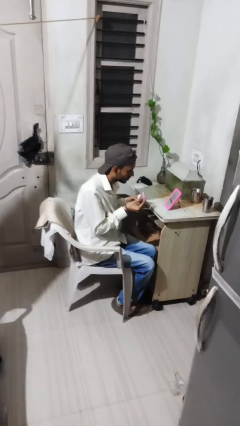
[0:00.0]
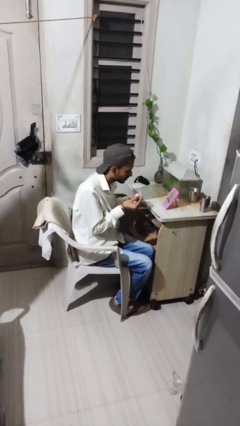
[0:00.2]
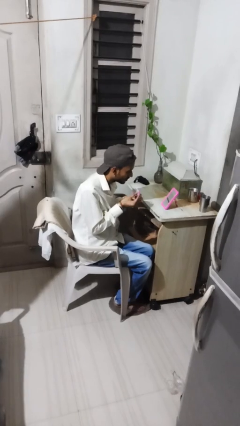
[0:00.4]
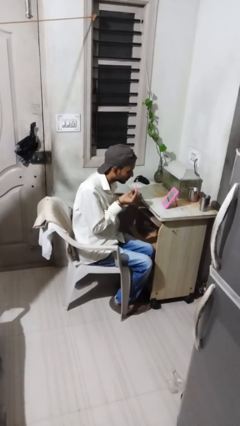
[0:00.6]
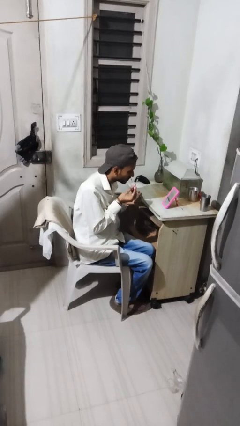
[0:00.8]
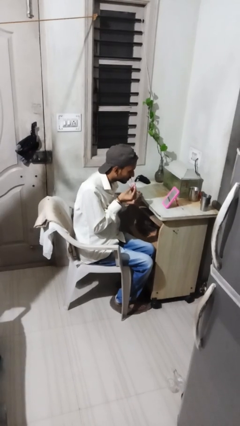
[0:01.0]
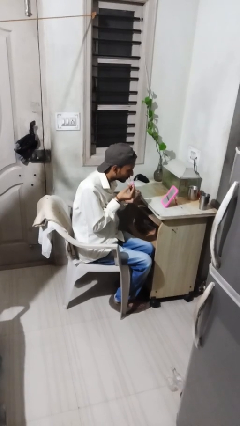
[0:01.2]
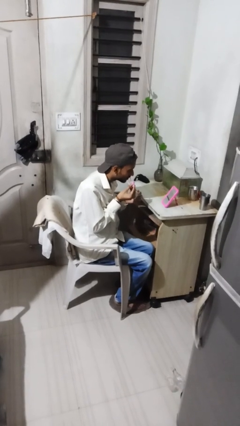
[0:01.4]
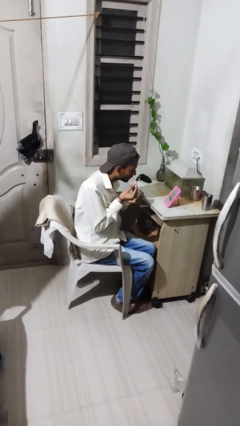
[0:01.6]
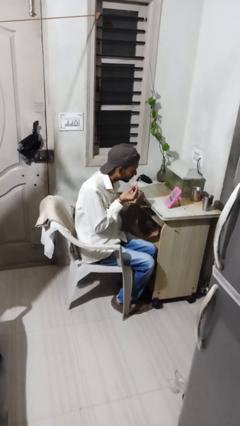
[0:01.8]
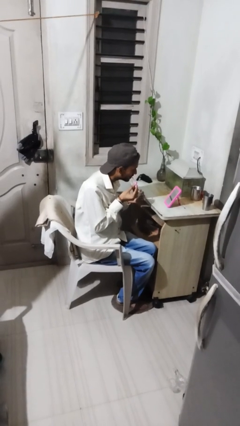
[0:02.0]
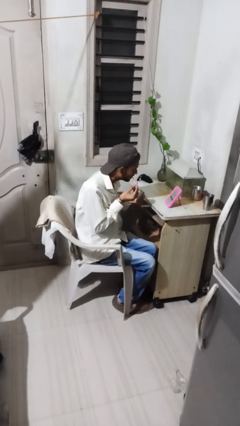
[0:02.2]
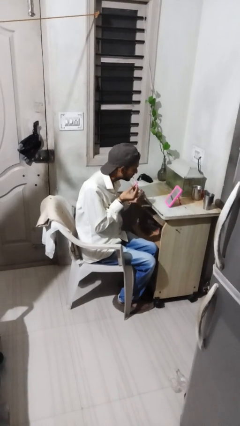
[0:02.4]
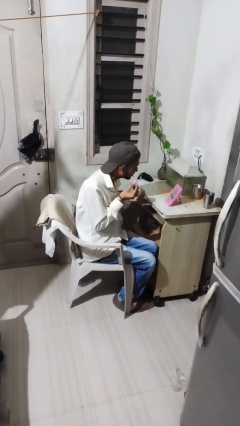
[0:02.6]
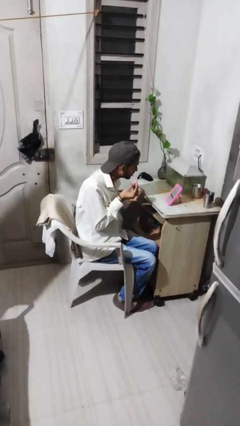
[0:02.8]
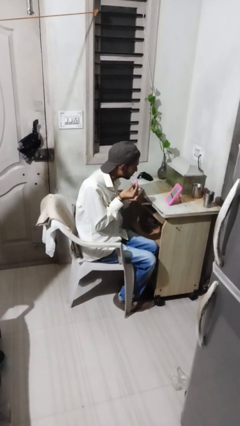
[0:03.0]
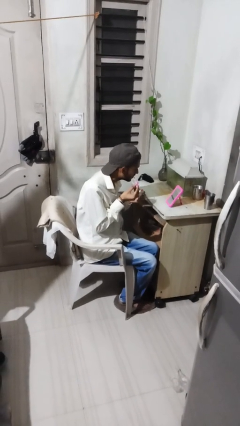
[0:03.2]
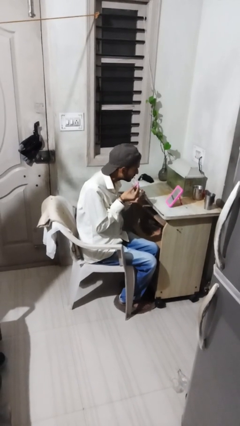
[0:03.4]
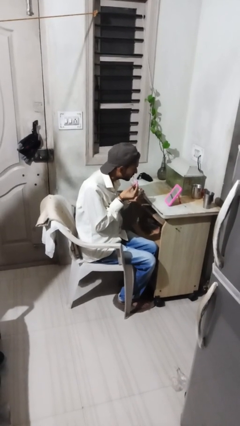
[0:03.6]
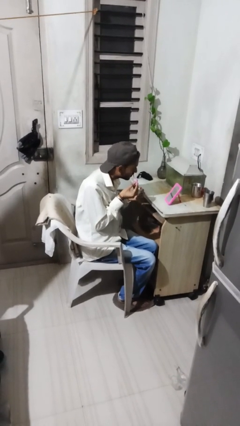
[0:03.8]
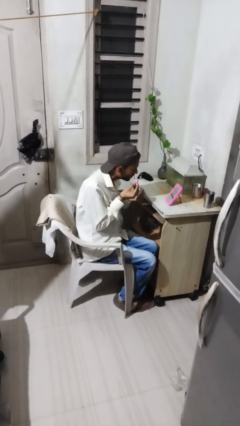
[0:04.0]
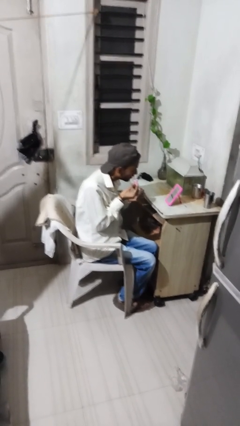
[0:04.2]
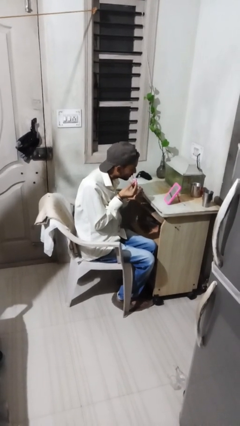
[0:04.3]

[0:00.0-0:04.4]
person applies lip makeup

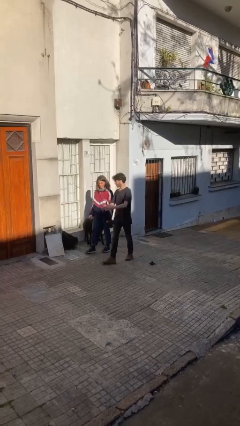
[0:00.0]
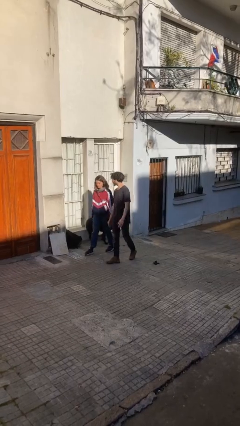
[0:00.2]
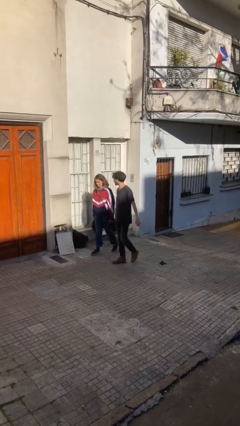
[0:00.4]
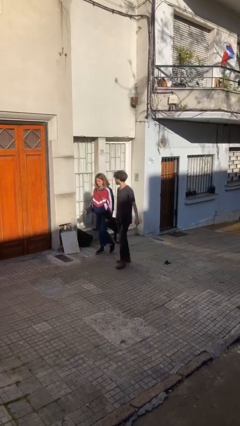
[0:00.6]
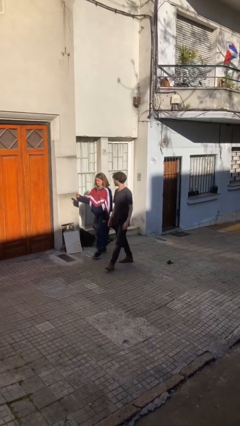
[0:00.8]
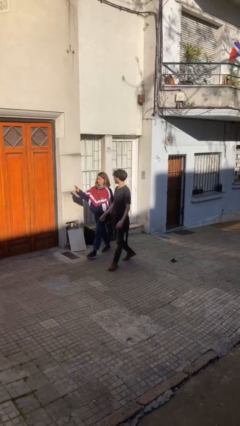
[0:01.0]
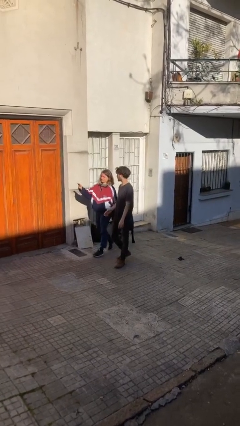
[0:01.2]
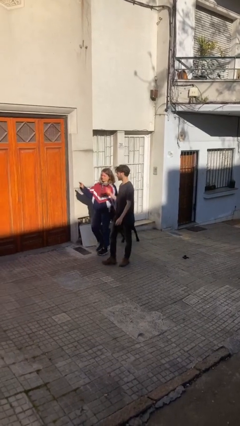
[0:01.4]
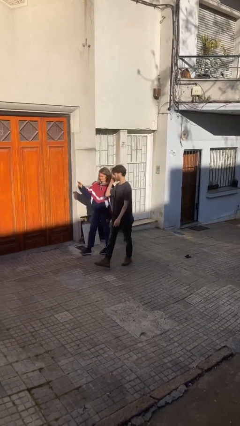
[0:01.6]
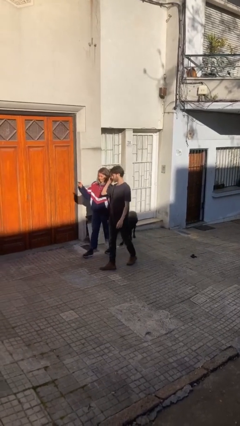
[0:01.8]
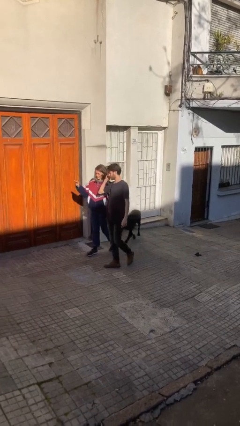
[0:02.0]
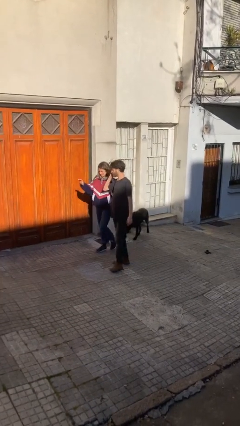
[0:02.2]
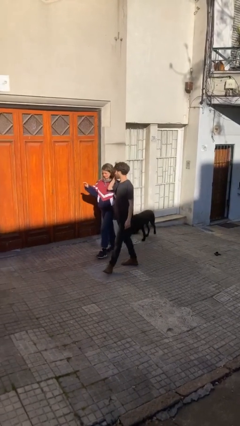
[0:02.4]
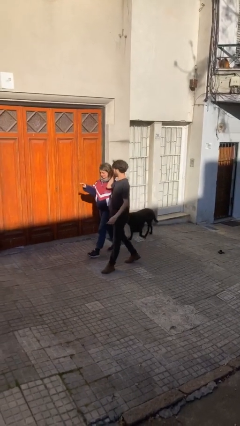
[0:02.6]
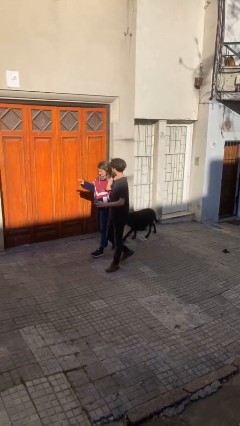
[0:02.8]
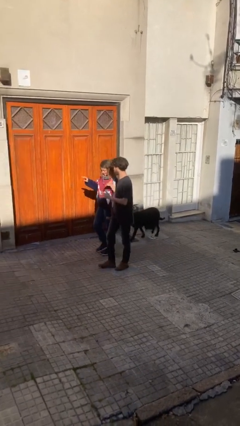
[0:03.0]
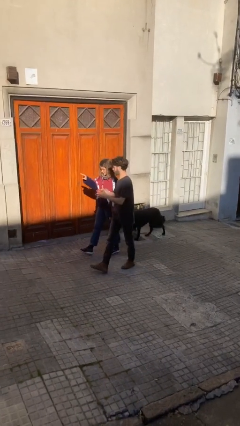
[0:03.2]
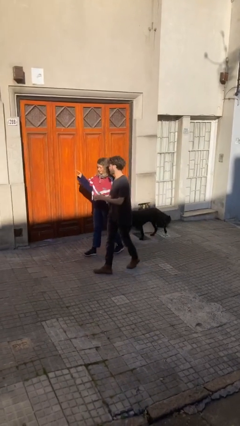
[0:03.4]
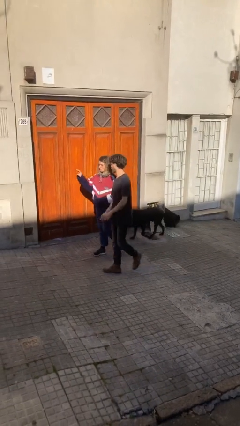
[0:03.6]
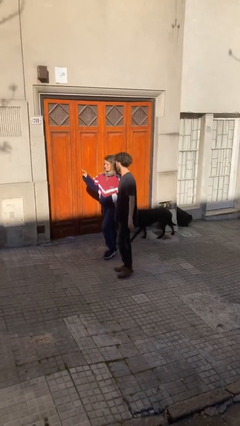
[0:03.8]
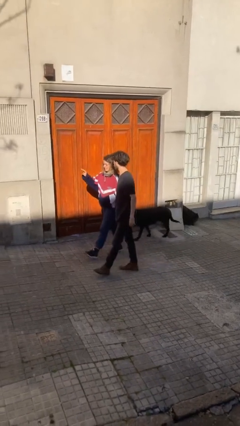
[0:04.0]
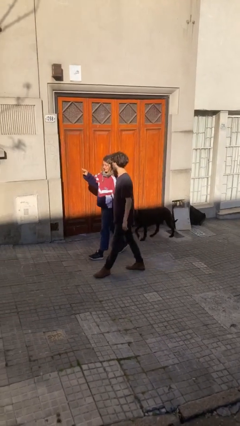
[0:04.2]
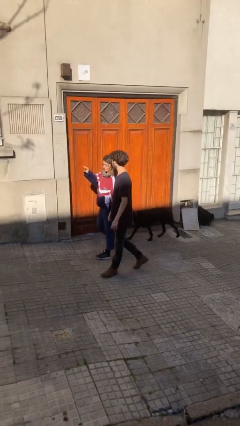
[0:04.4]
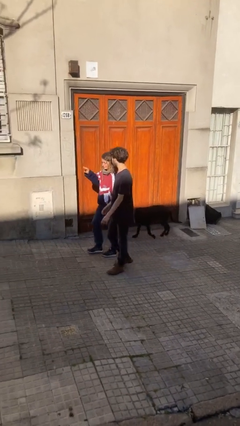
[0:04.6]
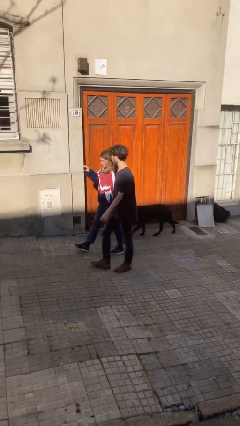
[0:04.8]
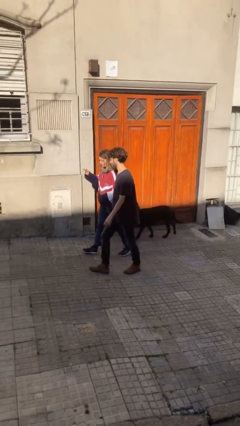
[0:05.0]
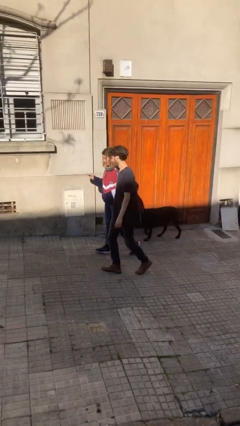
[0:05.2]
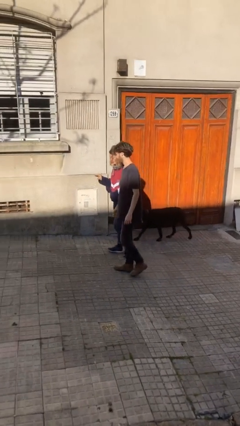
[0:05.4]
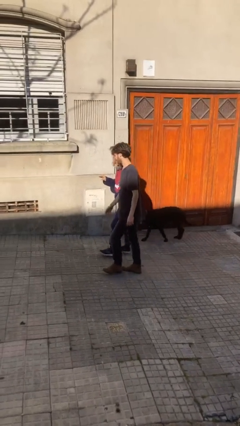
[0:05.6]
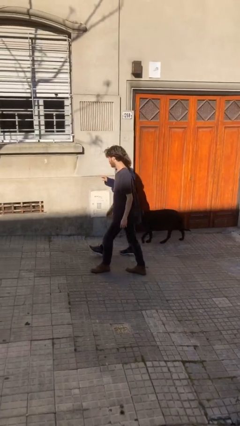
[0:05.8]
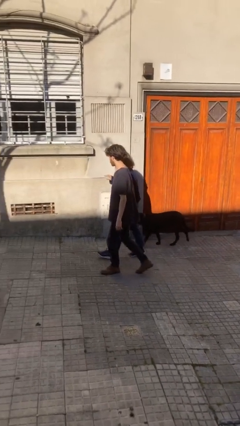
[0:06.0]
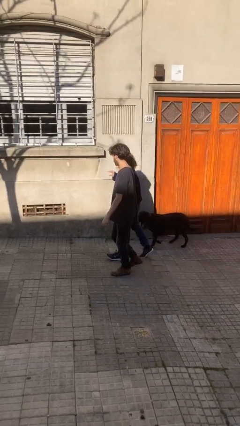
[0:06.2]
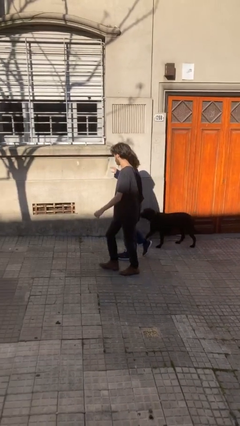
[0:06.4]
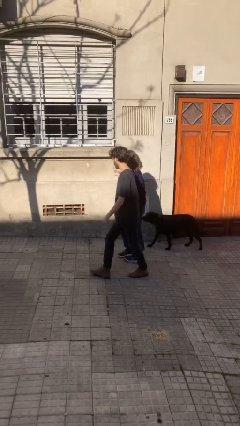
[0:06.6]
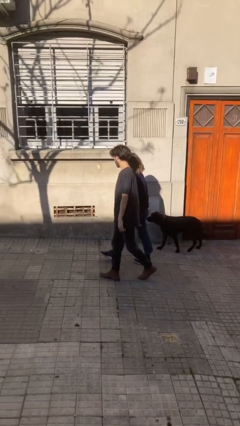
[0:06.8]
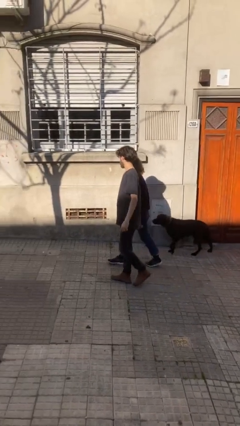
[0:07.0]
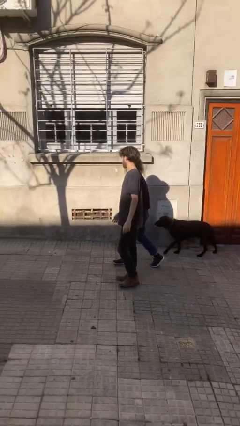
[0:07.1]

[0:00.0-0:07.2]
person talks to person

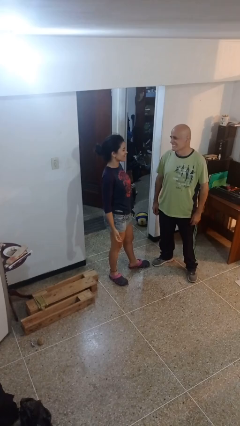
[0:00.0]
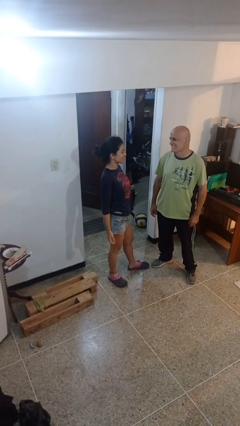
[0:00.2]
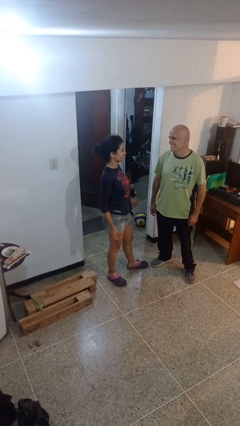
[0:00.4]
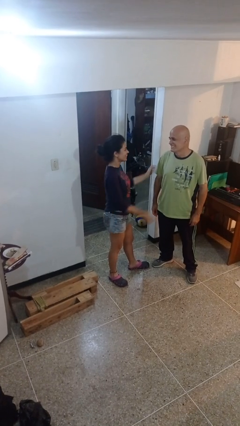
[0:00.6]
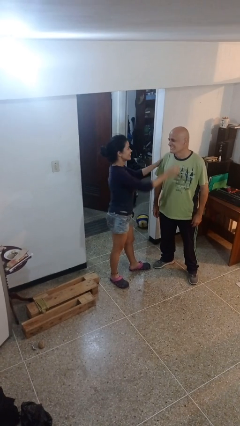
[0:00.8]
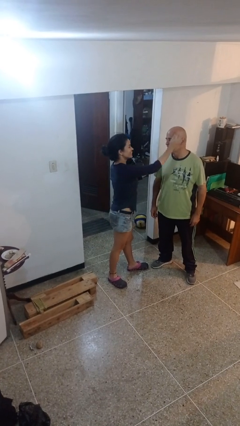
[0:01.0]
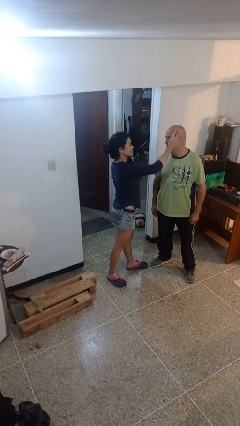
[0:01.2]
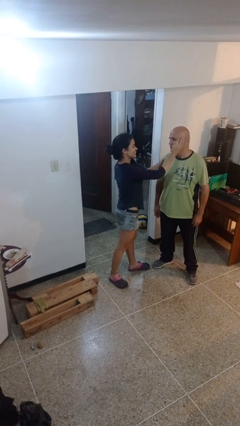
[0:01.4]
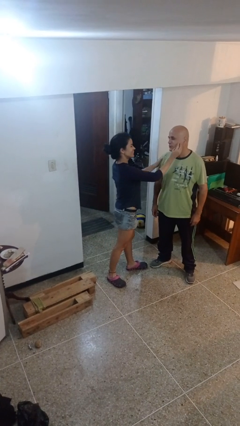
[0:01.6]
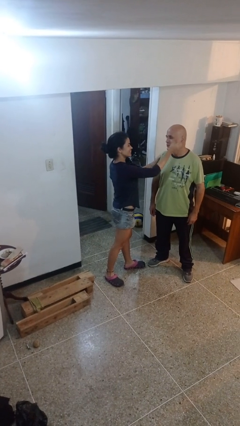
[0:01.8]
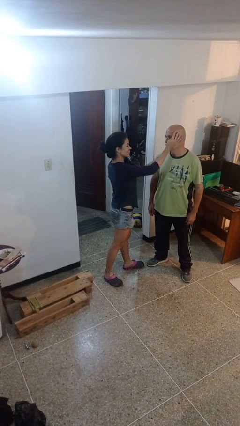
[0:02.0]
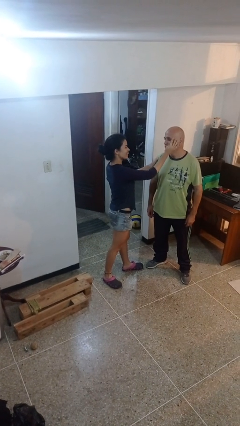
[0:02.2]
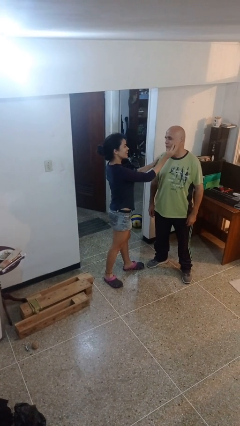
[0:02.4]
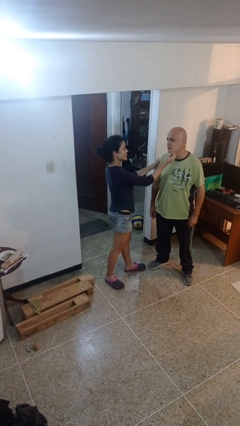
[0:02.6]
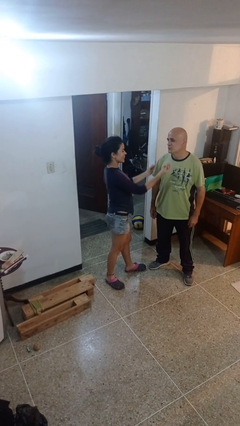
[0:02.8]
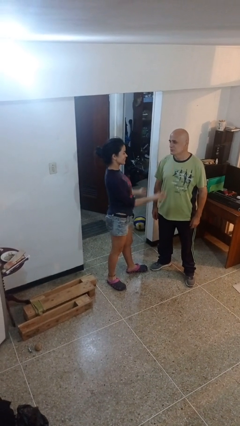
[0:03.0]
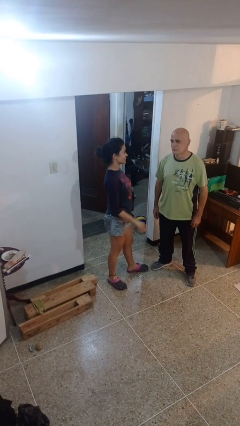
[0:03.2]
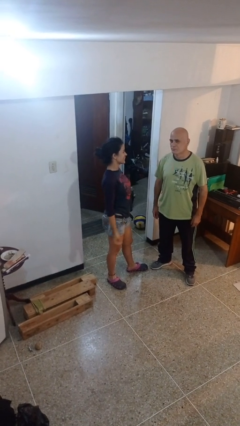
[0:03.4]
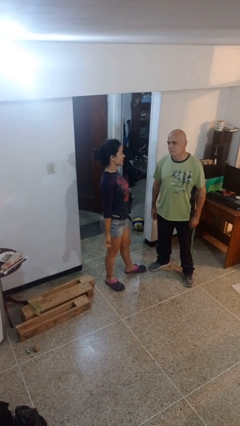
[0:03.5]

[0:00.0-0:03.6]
person touches face of person

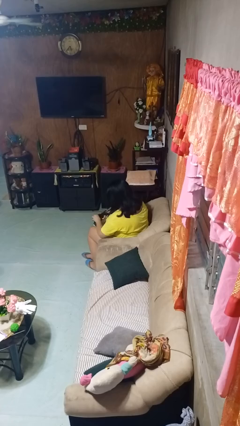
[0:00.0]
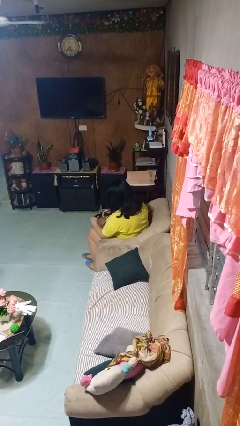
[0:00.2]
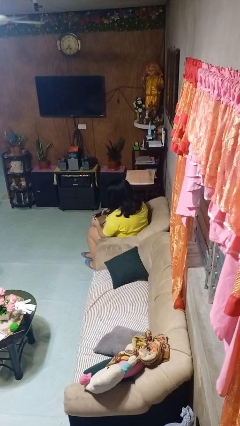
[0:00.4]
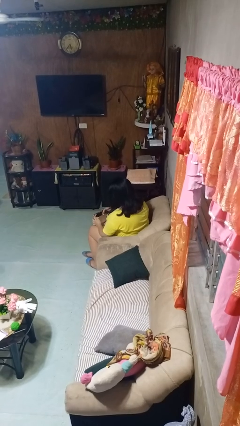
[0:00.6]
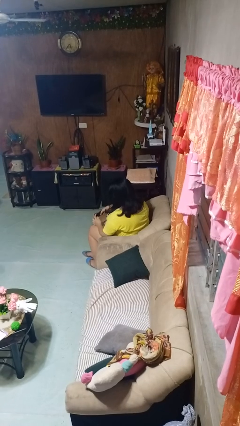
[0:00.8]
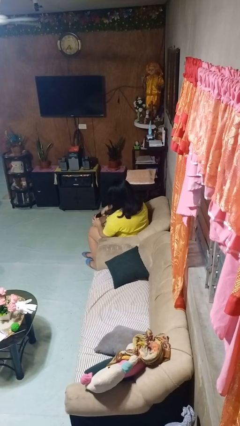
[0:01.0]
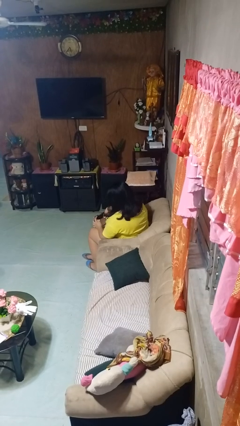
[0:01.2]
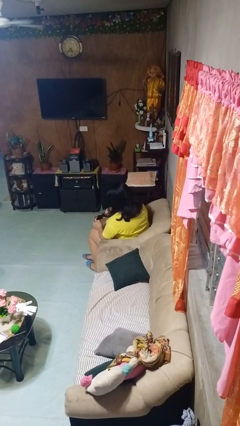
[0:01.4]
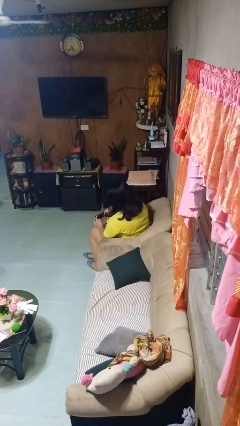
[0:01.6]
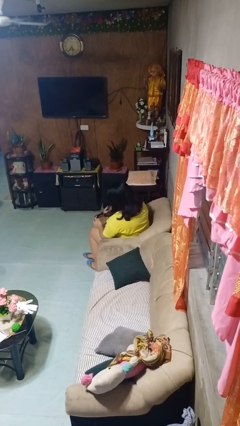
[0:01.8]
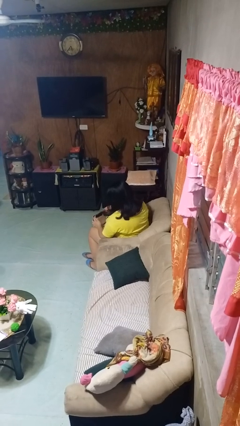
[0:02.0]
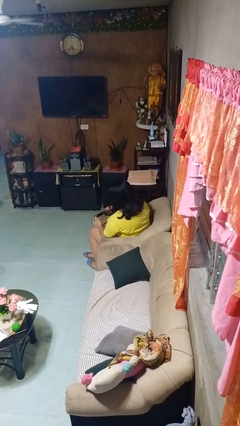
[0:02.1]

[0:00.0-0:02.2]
person takes object from purse
